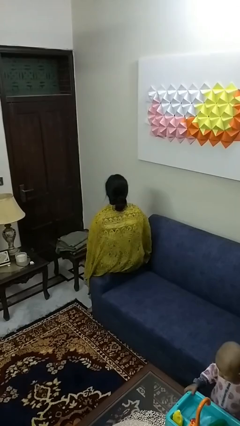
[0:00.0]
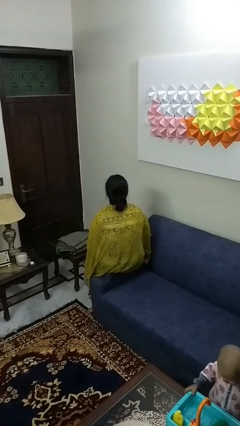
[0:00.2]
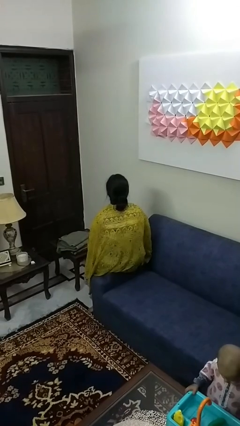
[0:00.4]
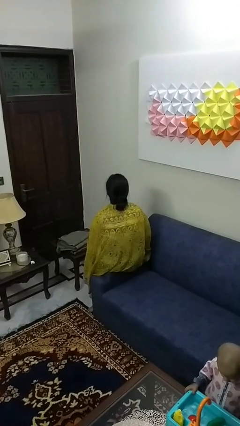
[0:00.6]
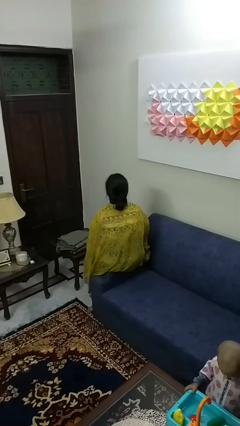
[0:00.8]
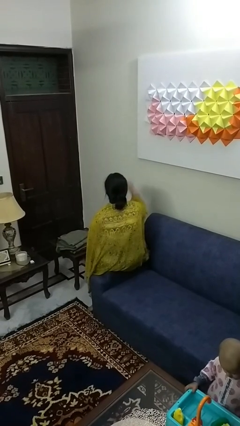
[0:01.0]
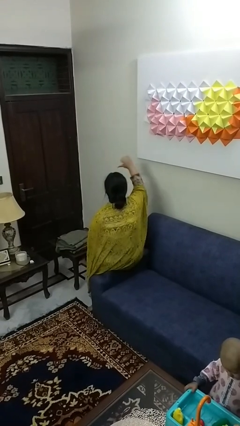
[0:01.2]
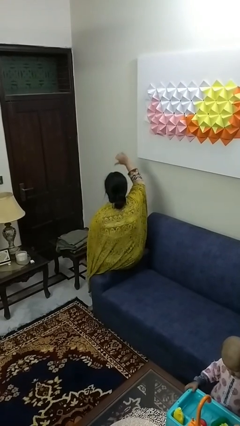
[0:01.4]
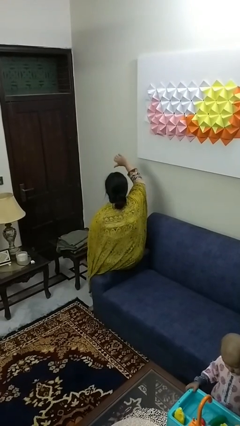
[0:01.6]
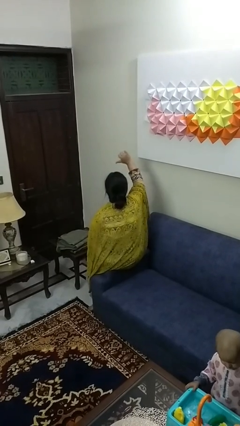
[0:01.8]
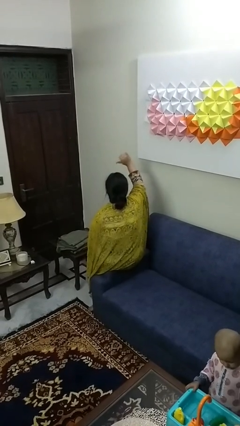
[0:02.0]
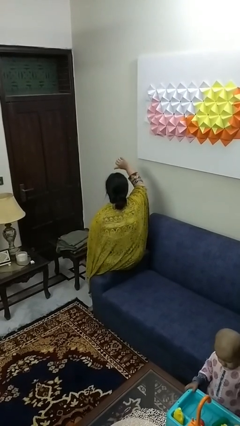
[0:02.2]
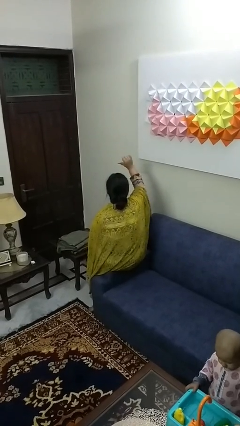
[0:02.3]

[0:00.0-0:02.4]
person gestures thumbs down

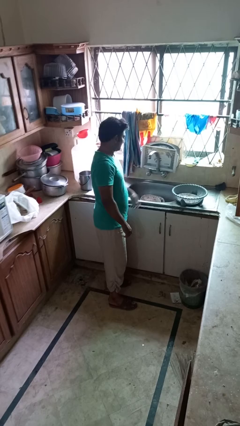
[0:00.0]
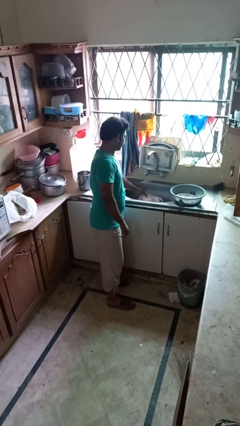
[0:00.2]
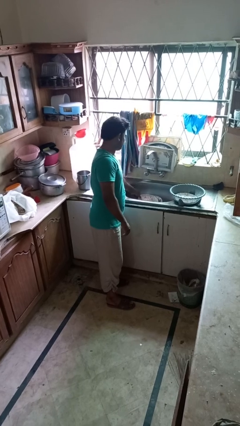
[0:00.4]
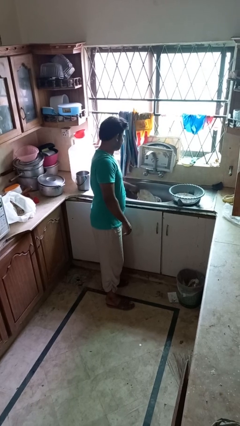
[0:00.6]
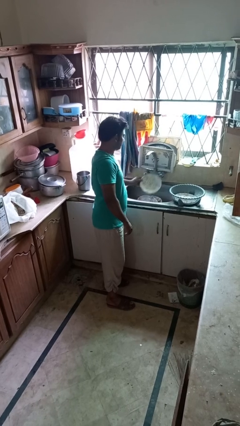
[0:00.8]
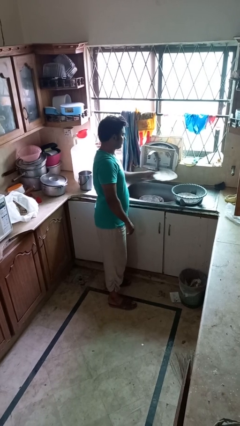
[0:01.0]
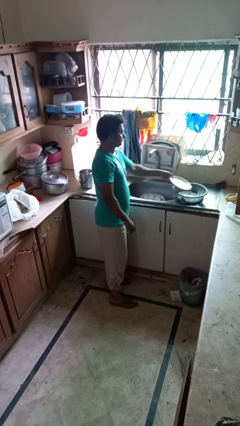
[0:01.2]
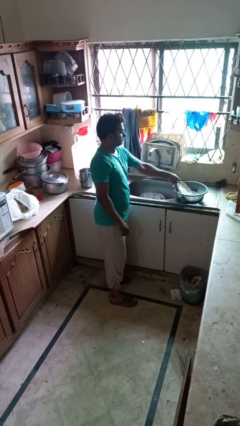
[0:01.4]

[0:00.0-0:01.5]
person loads dishwasher

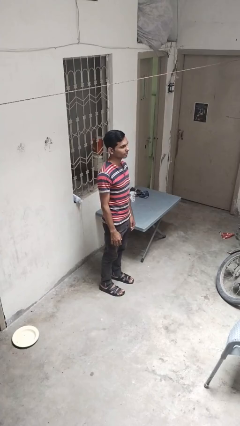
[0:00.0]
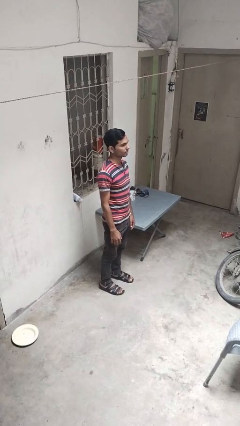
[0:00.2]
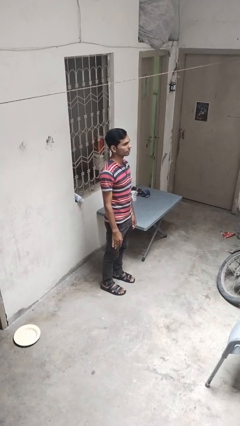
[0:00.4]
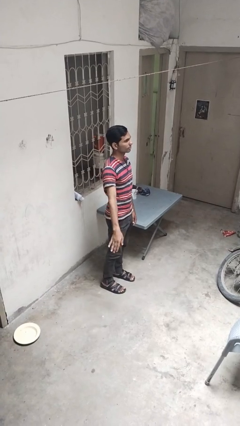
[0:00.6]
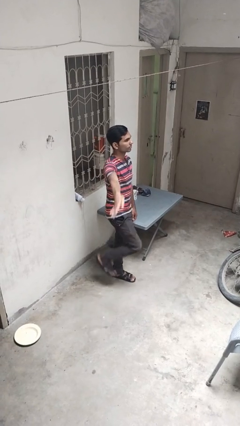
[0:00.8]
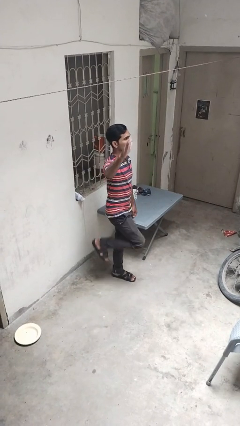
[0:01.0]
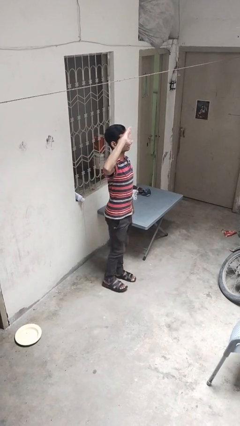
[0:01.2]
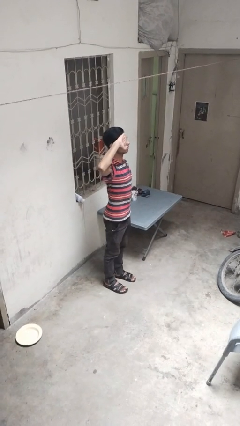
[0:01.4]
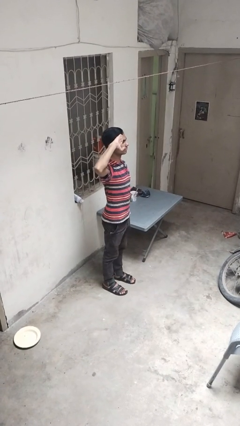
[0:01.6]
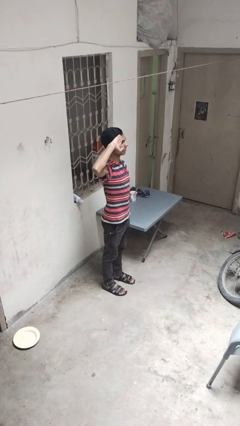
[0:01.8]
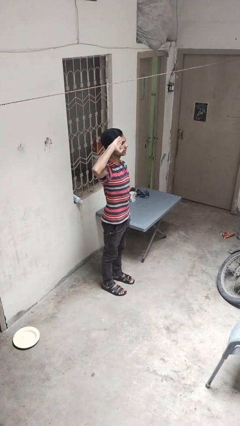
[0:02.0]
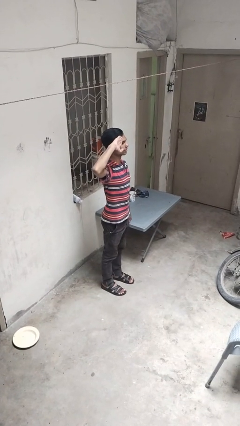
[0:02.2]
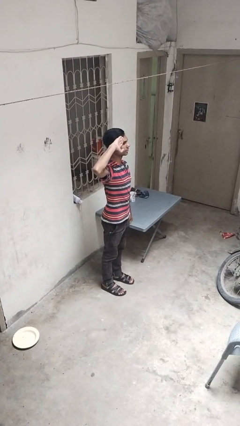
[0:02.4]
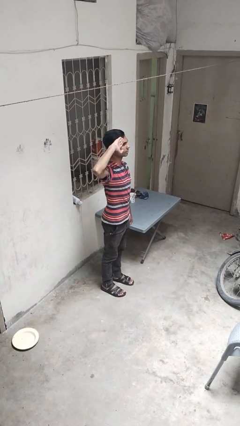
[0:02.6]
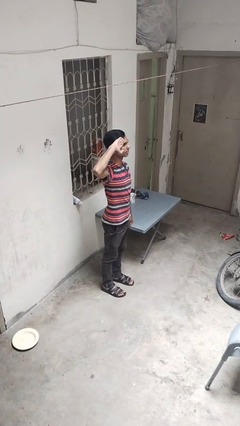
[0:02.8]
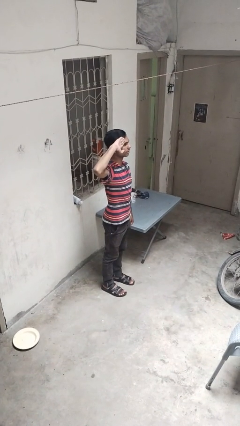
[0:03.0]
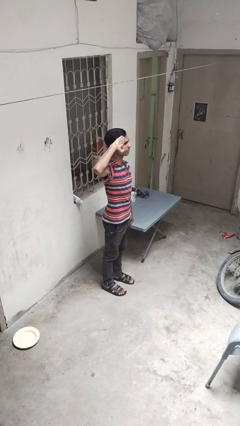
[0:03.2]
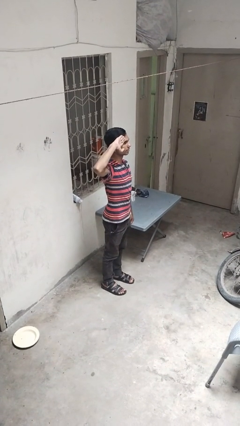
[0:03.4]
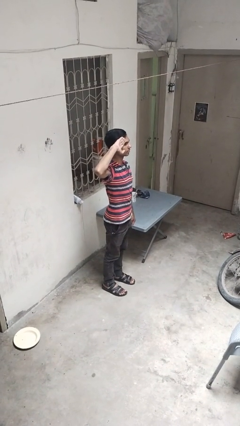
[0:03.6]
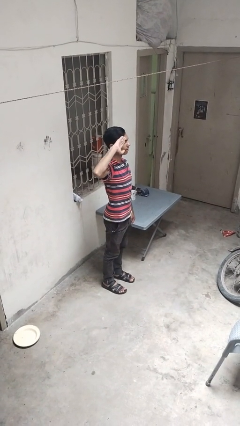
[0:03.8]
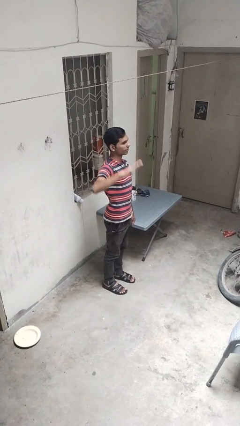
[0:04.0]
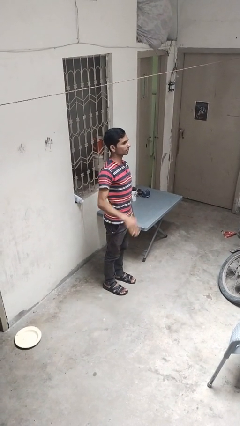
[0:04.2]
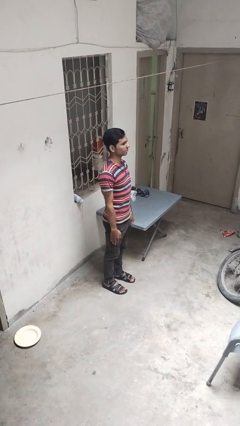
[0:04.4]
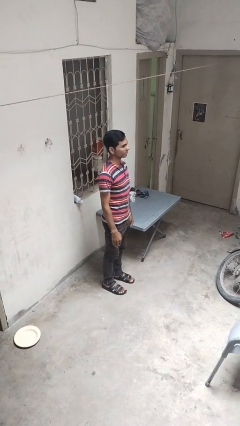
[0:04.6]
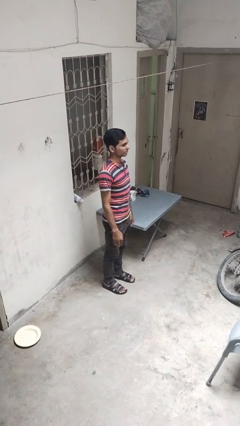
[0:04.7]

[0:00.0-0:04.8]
person salutes

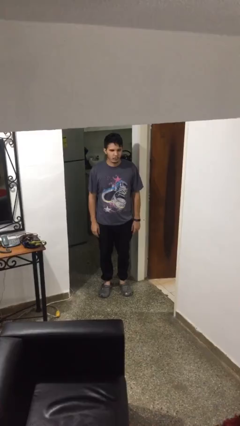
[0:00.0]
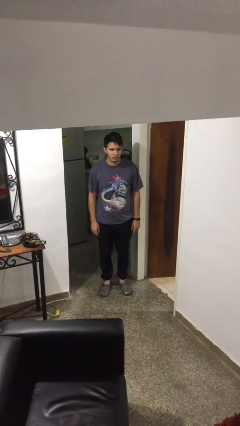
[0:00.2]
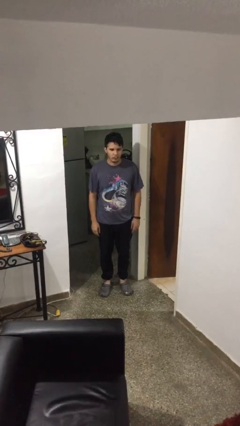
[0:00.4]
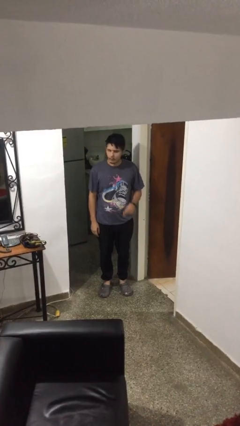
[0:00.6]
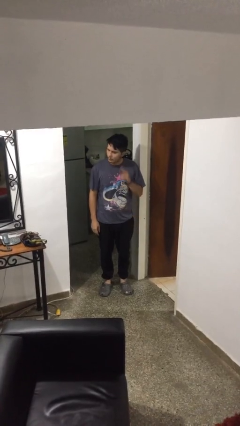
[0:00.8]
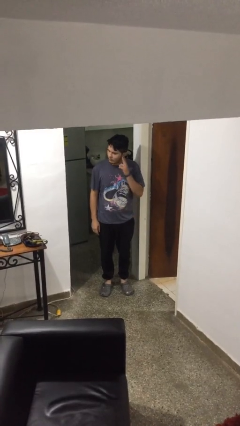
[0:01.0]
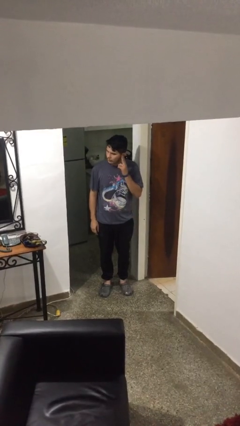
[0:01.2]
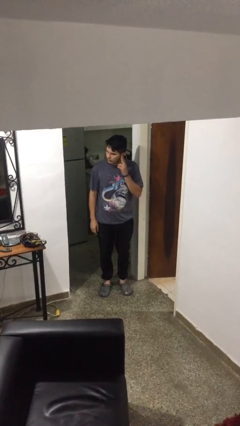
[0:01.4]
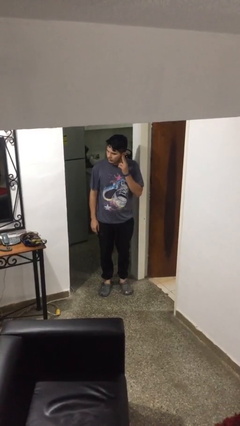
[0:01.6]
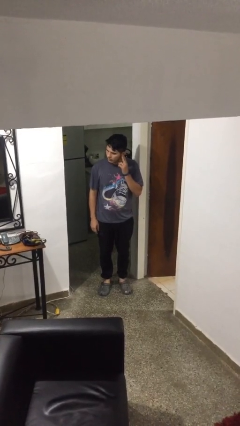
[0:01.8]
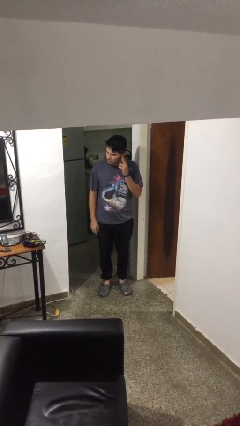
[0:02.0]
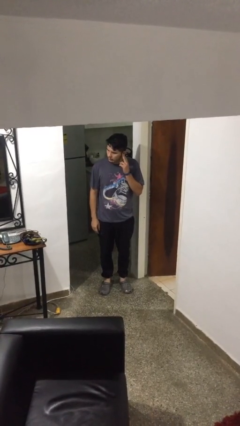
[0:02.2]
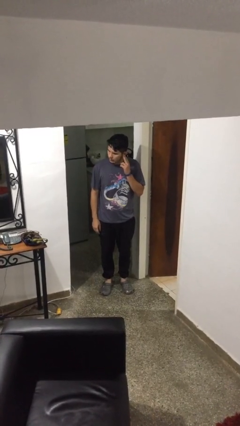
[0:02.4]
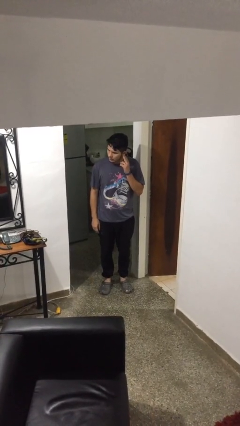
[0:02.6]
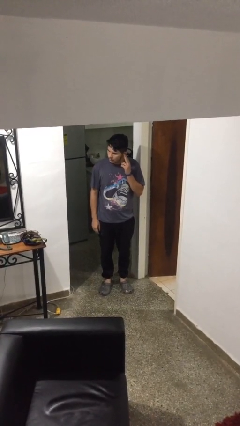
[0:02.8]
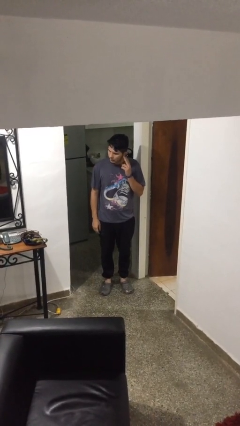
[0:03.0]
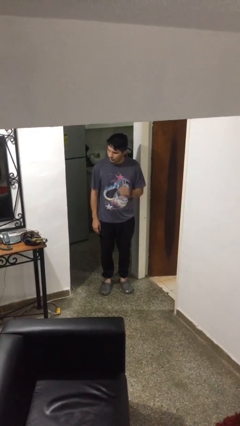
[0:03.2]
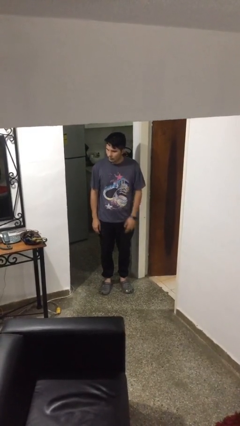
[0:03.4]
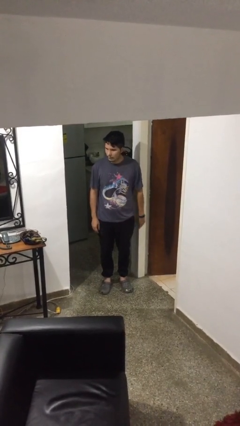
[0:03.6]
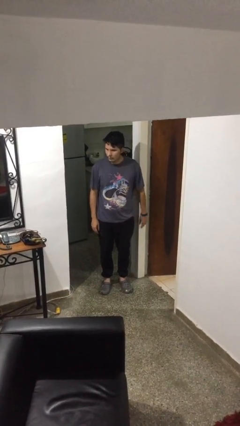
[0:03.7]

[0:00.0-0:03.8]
person gestures listen closely

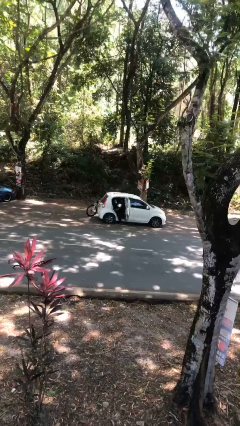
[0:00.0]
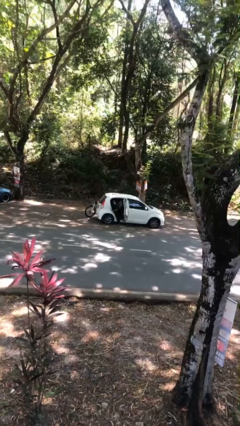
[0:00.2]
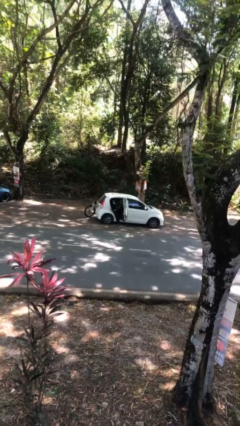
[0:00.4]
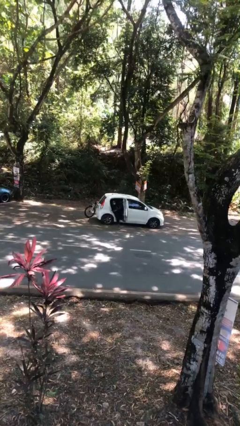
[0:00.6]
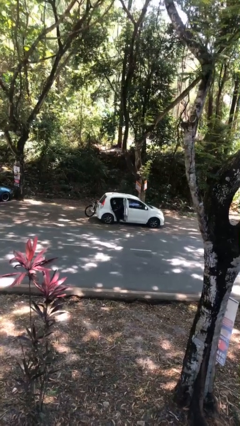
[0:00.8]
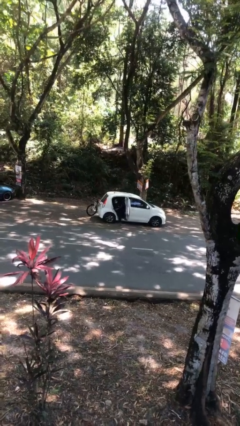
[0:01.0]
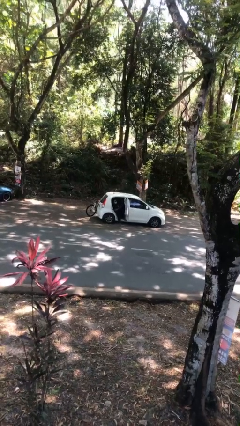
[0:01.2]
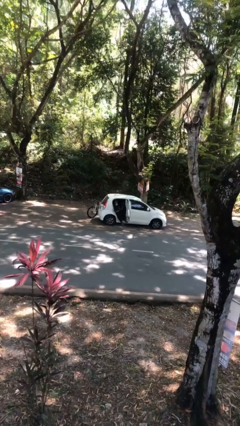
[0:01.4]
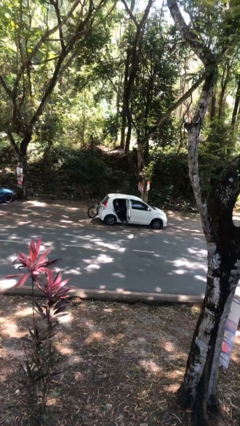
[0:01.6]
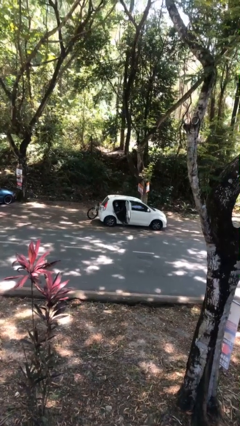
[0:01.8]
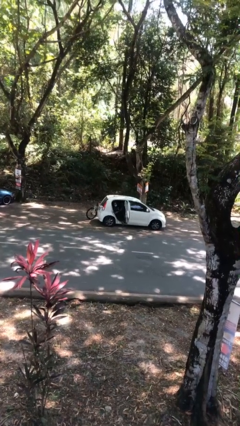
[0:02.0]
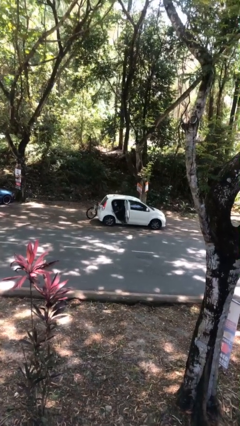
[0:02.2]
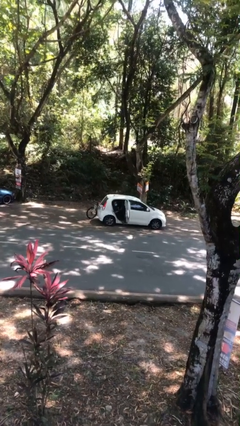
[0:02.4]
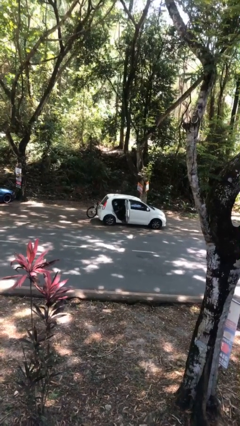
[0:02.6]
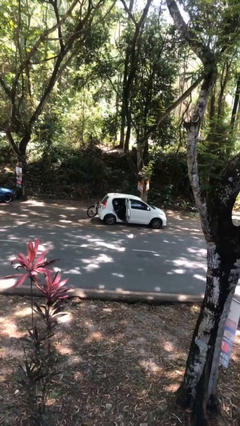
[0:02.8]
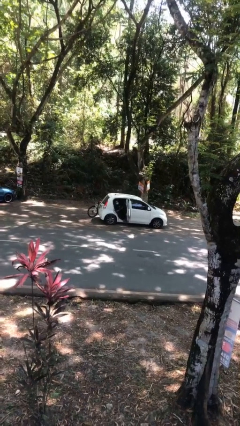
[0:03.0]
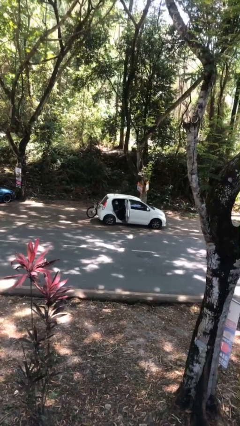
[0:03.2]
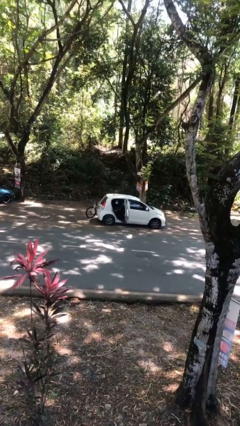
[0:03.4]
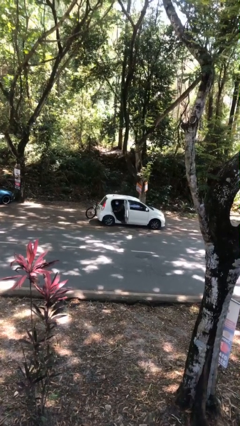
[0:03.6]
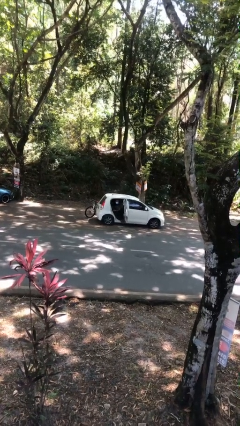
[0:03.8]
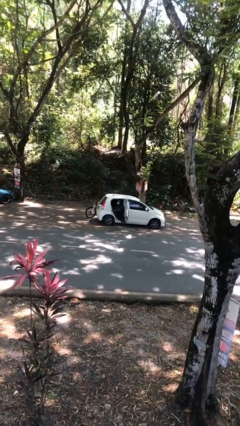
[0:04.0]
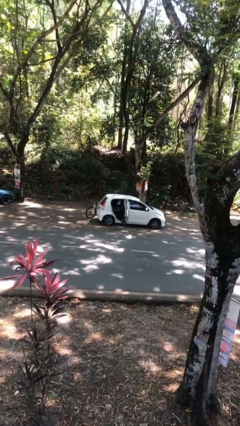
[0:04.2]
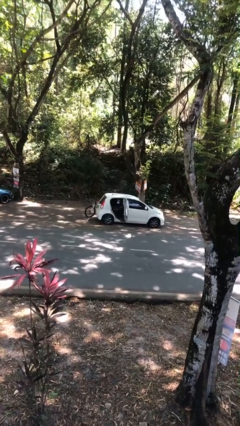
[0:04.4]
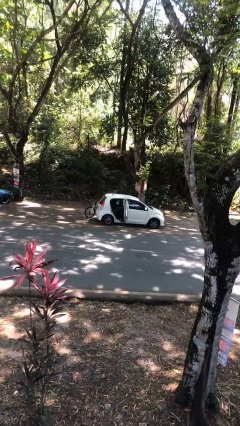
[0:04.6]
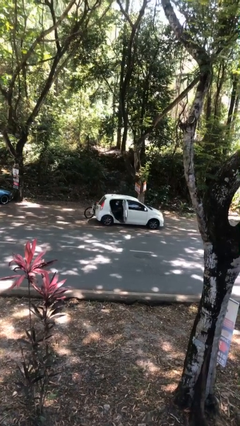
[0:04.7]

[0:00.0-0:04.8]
person interacts with laptop

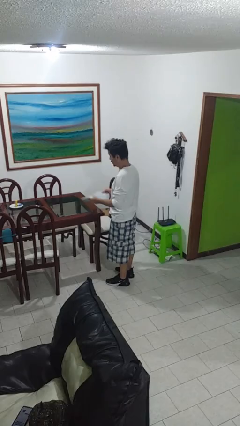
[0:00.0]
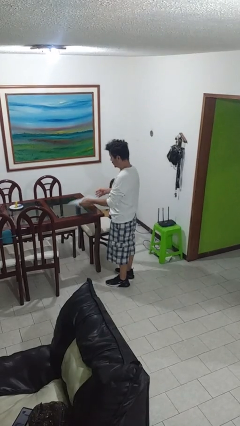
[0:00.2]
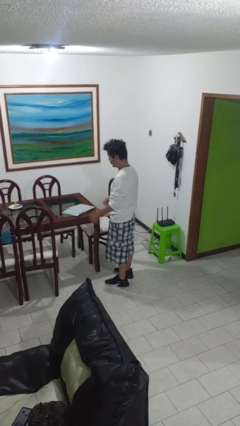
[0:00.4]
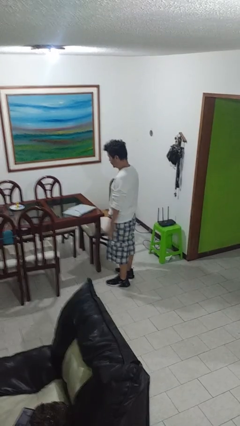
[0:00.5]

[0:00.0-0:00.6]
person throws object on table
